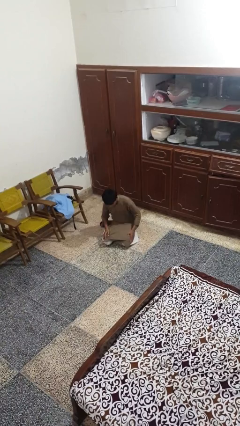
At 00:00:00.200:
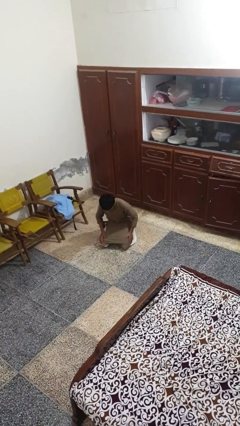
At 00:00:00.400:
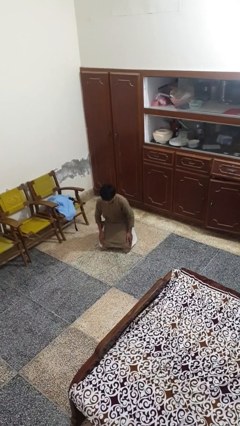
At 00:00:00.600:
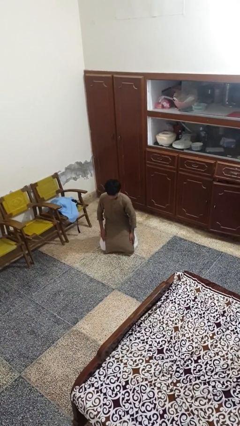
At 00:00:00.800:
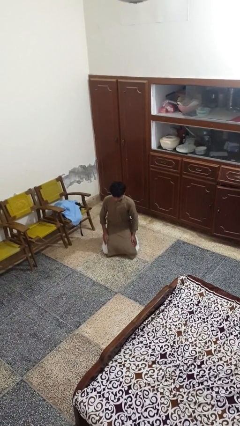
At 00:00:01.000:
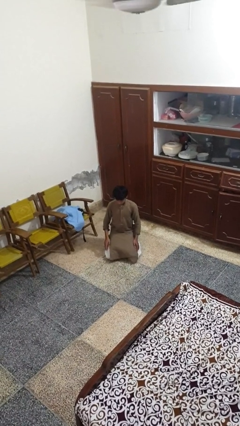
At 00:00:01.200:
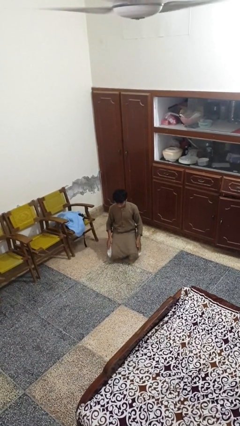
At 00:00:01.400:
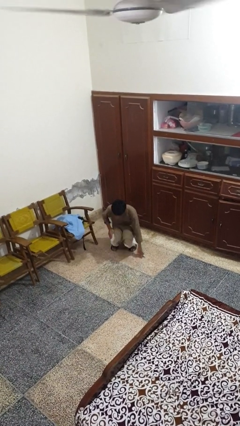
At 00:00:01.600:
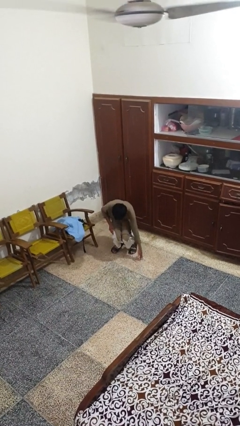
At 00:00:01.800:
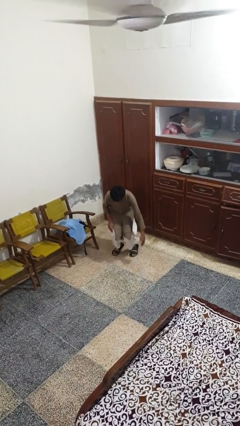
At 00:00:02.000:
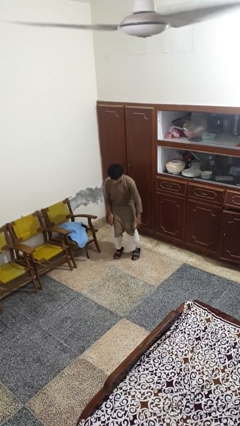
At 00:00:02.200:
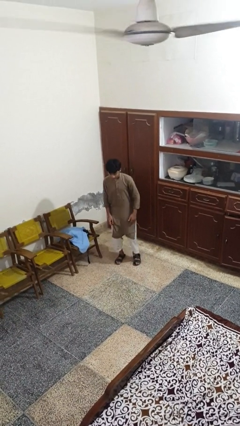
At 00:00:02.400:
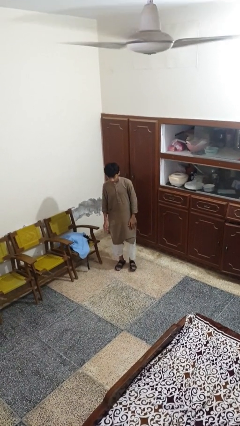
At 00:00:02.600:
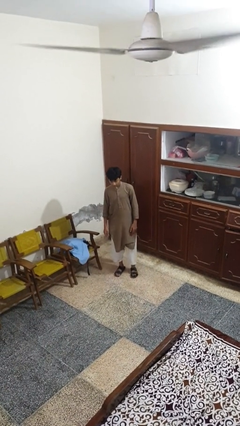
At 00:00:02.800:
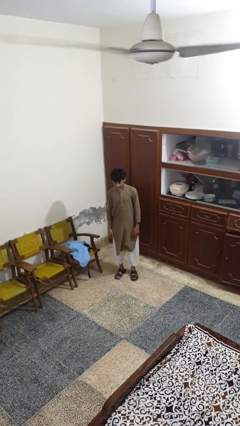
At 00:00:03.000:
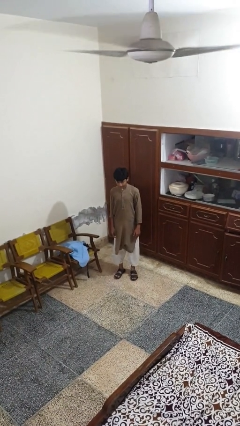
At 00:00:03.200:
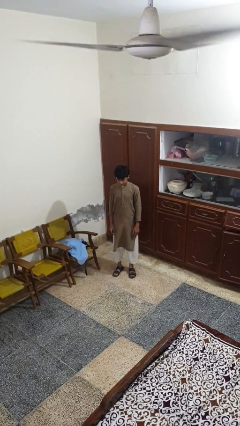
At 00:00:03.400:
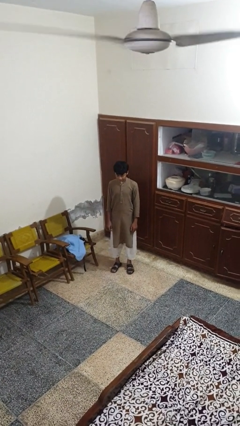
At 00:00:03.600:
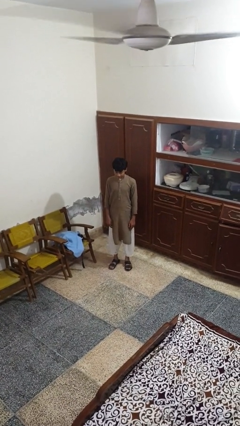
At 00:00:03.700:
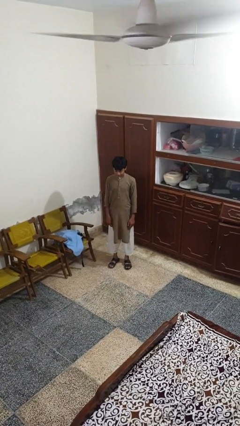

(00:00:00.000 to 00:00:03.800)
person stands up from floor

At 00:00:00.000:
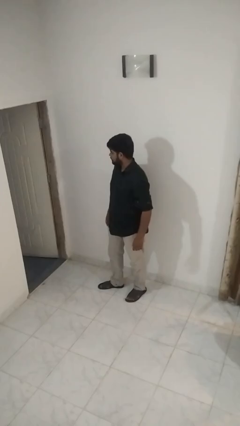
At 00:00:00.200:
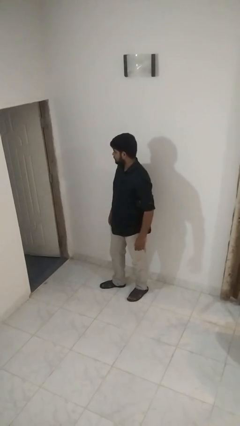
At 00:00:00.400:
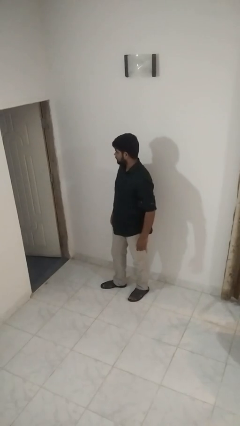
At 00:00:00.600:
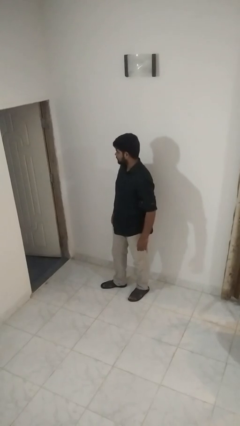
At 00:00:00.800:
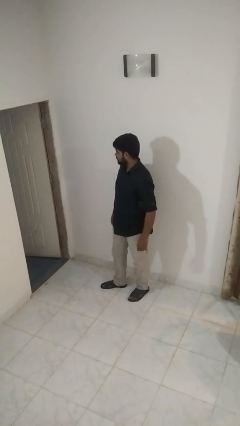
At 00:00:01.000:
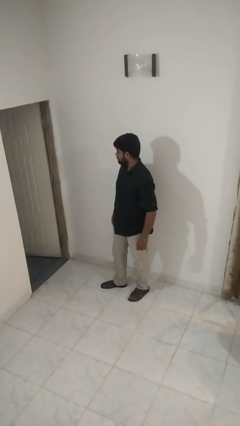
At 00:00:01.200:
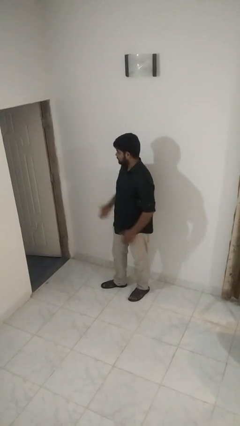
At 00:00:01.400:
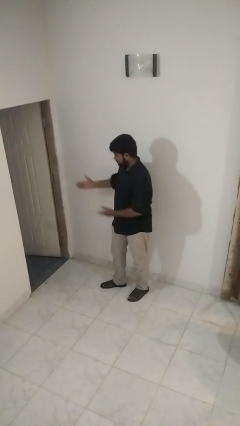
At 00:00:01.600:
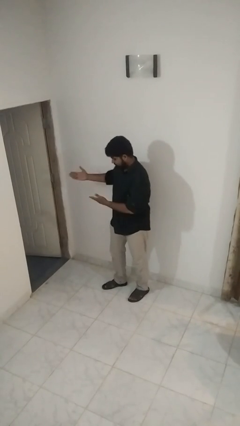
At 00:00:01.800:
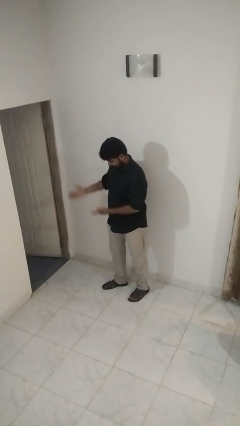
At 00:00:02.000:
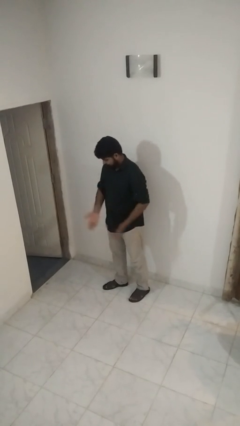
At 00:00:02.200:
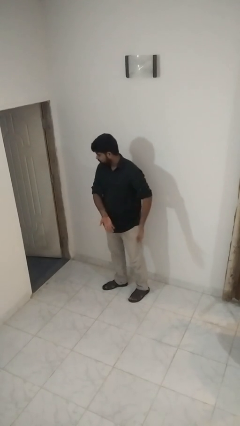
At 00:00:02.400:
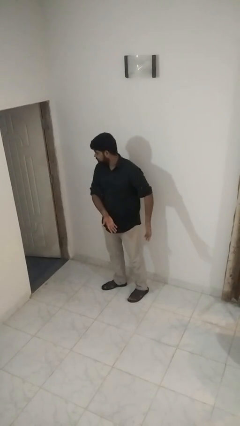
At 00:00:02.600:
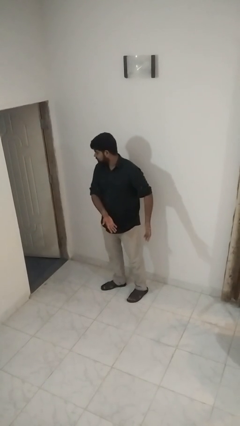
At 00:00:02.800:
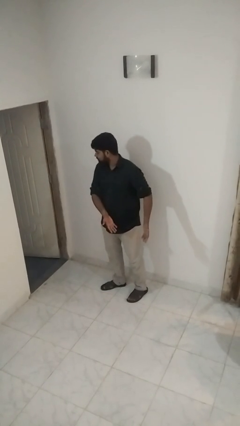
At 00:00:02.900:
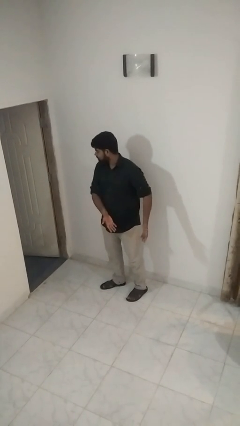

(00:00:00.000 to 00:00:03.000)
person gestures come here

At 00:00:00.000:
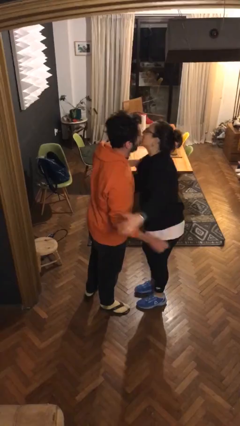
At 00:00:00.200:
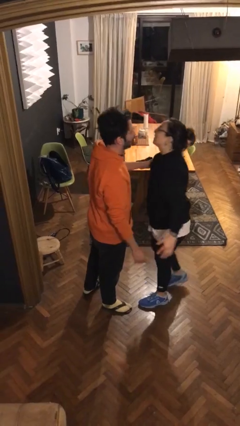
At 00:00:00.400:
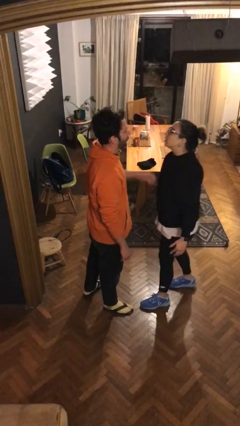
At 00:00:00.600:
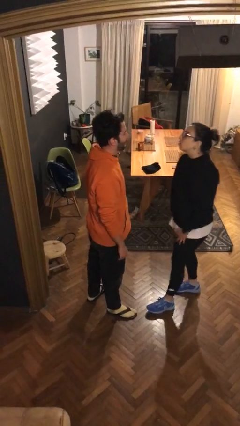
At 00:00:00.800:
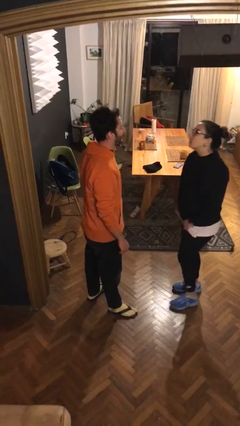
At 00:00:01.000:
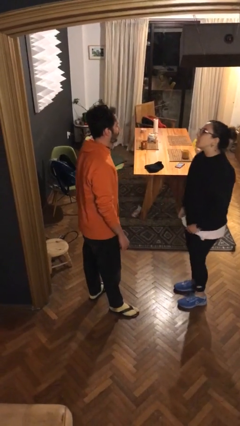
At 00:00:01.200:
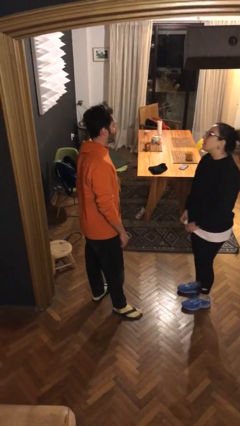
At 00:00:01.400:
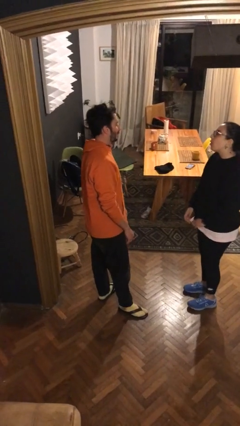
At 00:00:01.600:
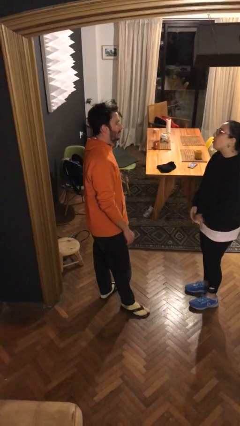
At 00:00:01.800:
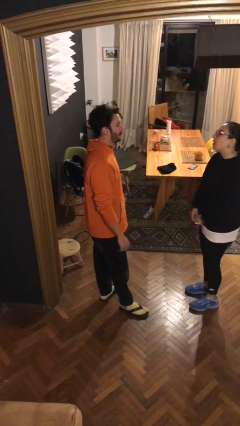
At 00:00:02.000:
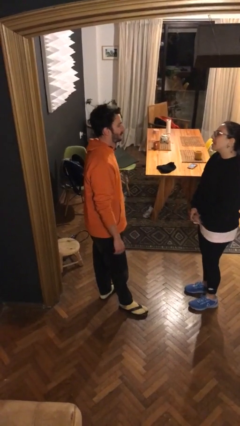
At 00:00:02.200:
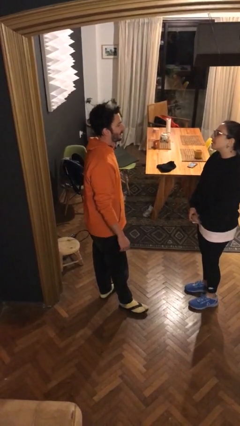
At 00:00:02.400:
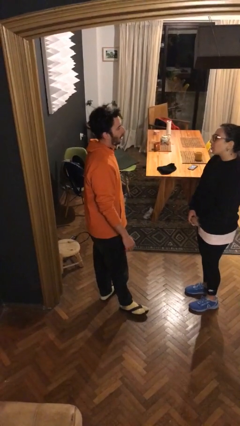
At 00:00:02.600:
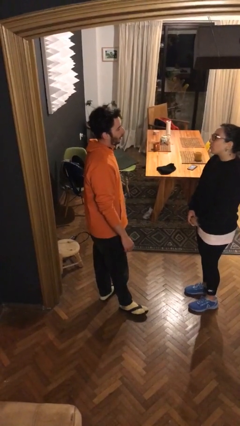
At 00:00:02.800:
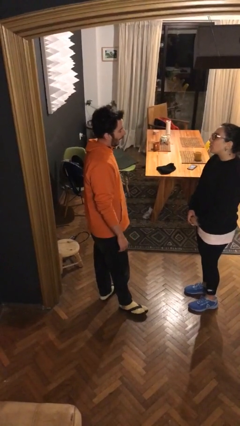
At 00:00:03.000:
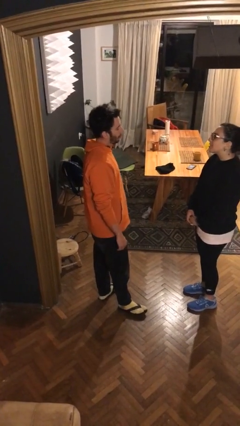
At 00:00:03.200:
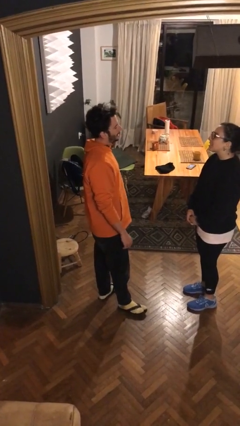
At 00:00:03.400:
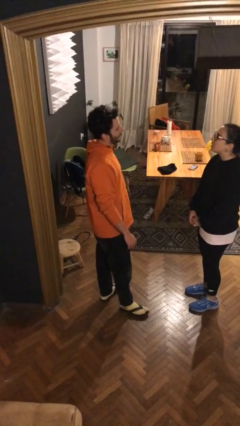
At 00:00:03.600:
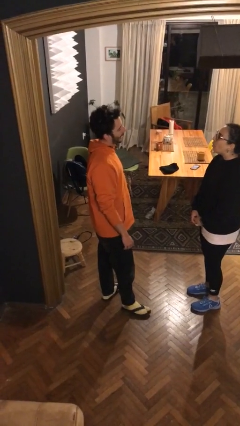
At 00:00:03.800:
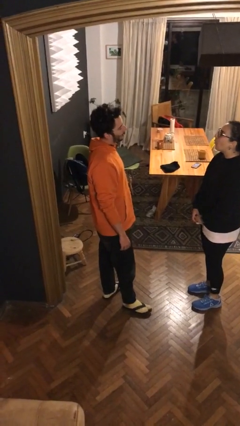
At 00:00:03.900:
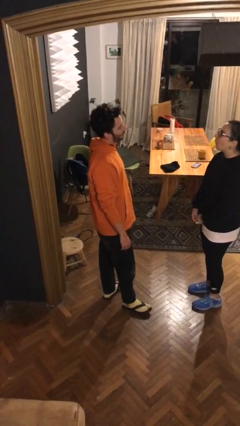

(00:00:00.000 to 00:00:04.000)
person talks to person

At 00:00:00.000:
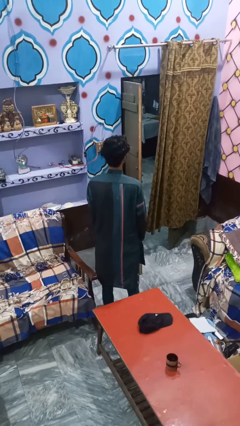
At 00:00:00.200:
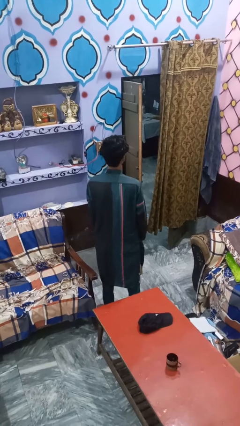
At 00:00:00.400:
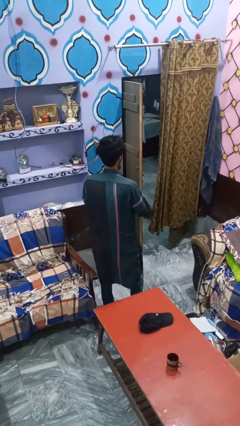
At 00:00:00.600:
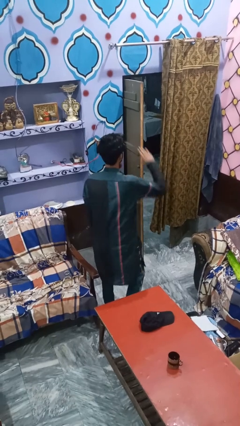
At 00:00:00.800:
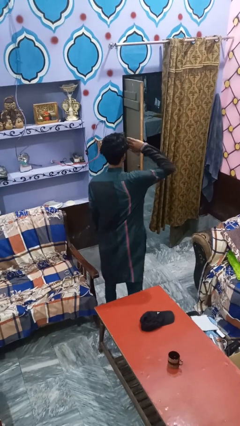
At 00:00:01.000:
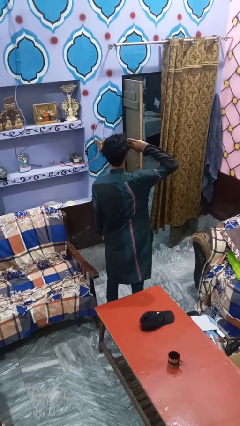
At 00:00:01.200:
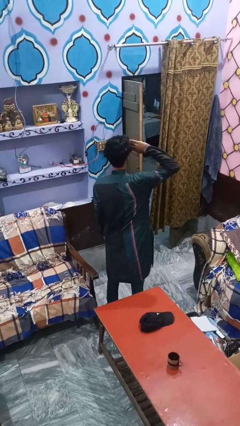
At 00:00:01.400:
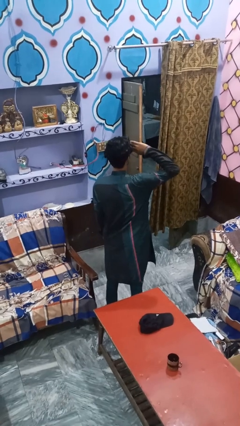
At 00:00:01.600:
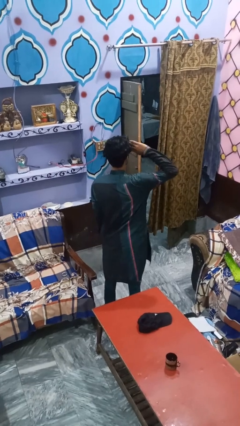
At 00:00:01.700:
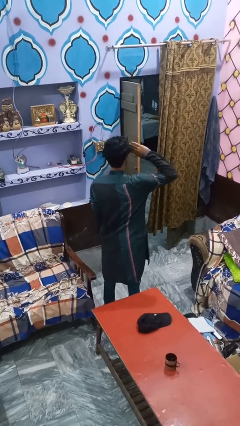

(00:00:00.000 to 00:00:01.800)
person salutes

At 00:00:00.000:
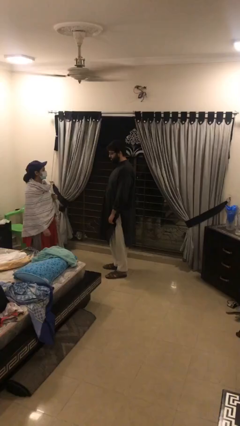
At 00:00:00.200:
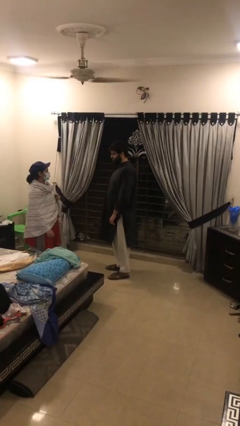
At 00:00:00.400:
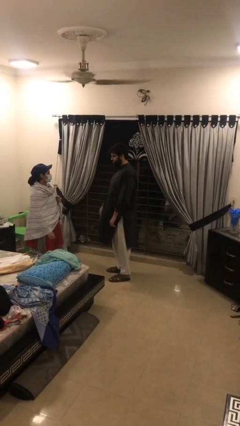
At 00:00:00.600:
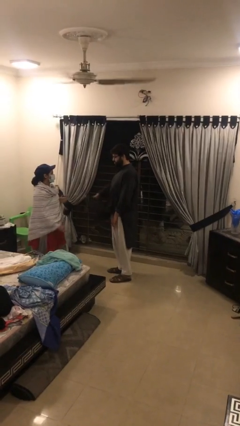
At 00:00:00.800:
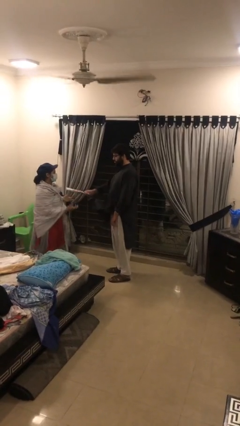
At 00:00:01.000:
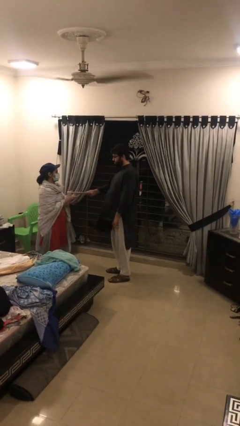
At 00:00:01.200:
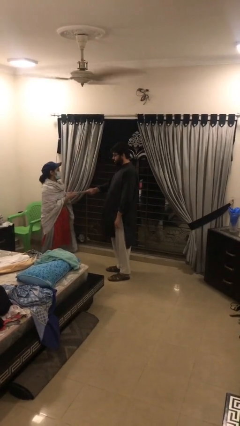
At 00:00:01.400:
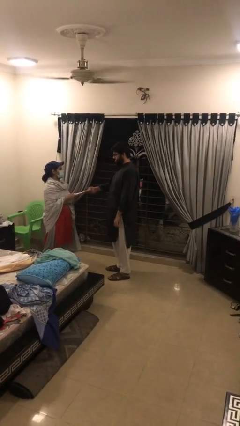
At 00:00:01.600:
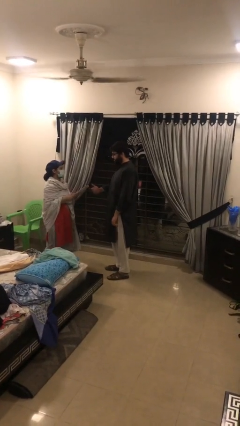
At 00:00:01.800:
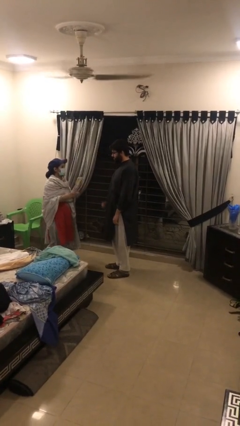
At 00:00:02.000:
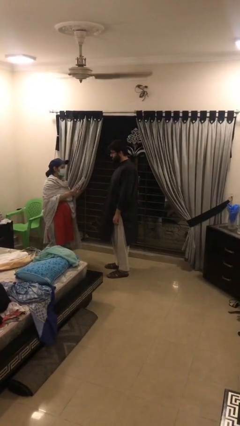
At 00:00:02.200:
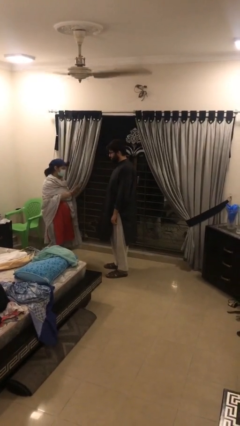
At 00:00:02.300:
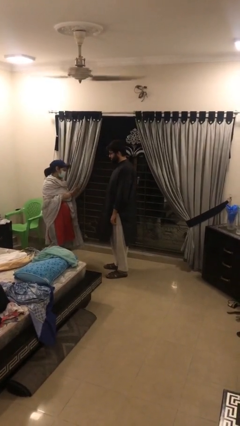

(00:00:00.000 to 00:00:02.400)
person transfers object to person

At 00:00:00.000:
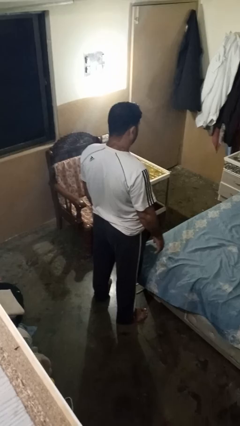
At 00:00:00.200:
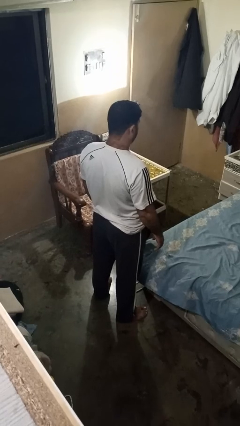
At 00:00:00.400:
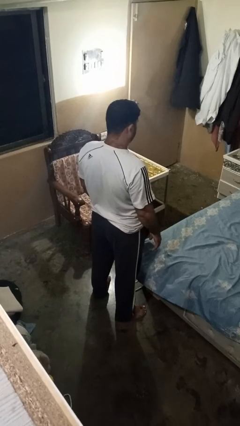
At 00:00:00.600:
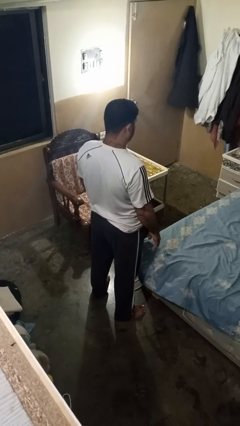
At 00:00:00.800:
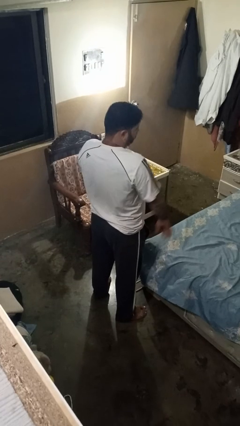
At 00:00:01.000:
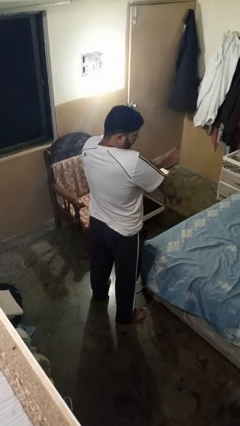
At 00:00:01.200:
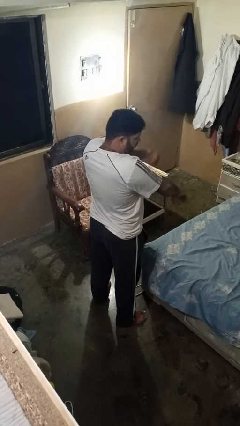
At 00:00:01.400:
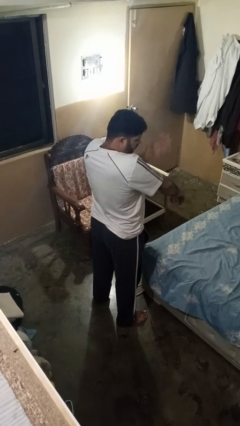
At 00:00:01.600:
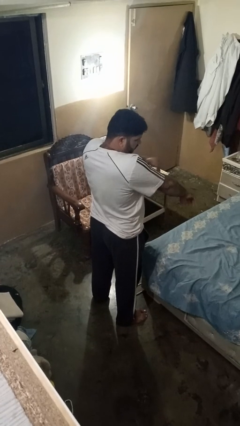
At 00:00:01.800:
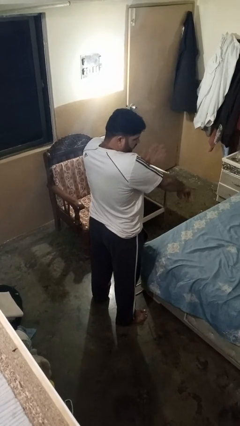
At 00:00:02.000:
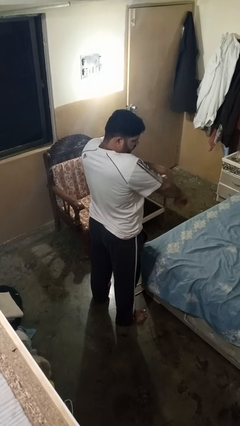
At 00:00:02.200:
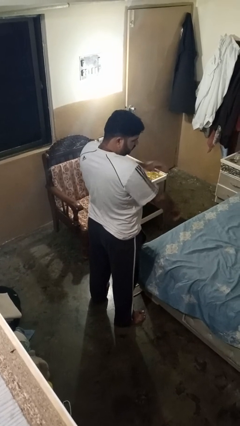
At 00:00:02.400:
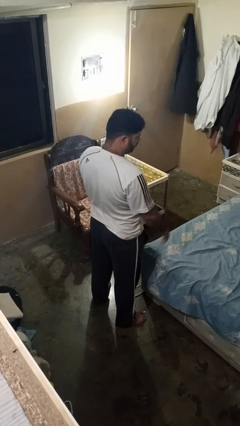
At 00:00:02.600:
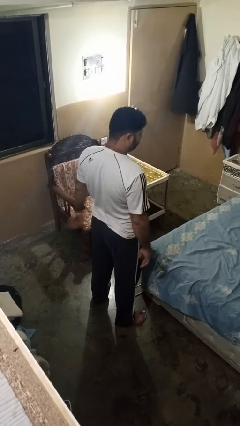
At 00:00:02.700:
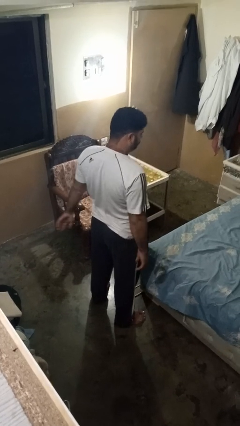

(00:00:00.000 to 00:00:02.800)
person swats bug
